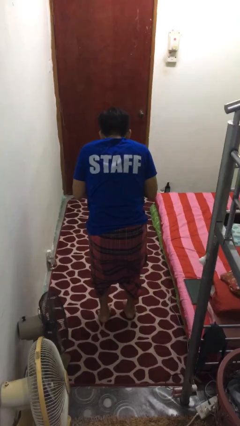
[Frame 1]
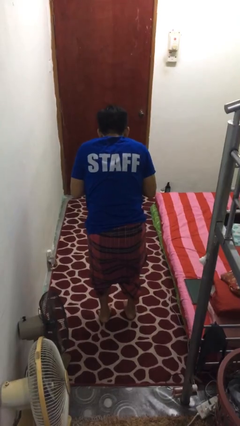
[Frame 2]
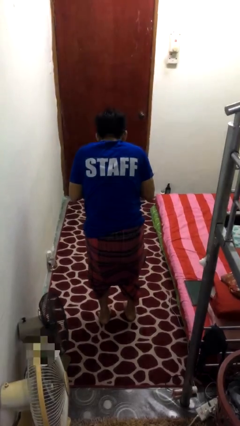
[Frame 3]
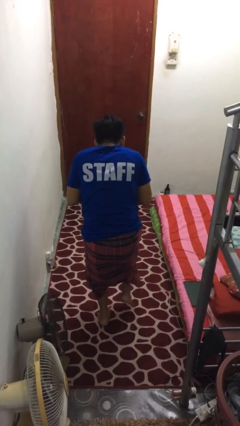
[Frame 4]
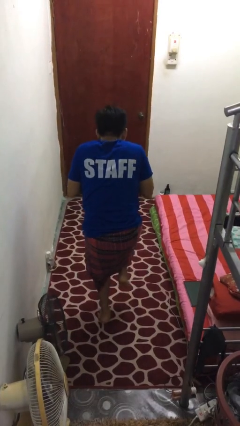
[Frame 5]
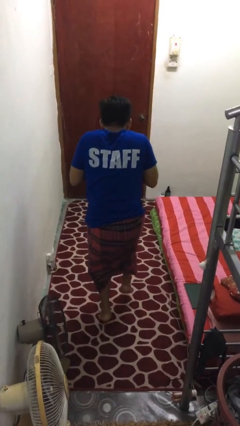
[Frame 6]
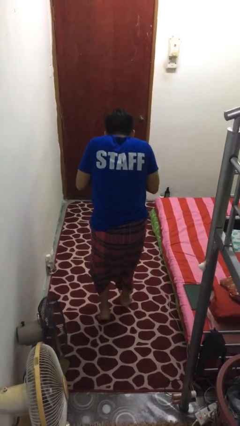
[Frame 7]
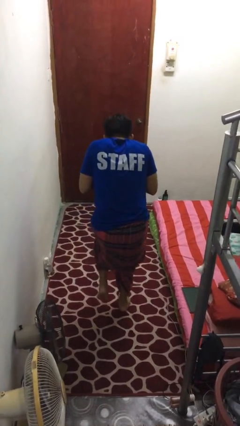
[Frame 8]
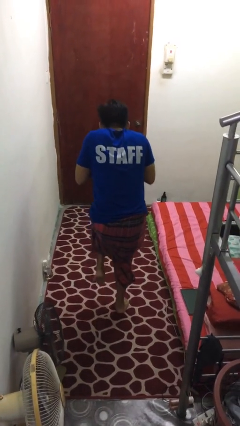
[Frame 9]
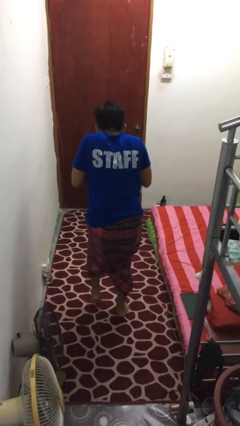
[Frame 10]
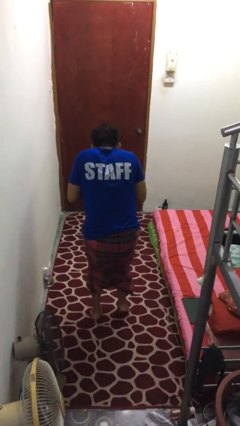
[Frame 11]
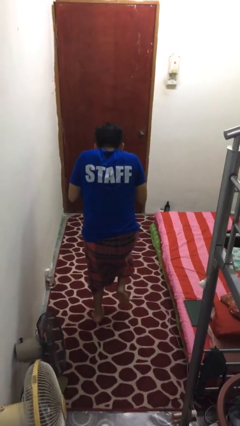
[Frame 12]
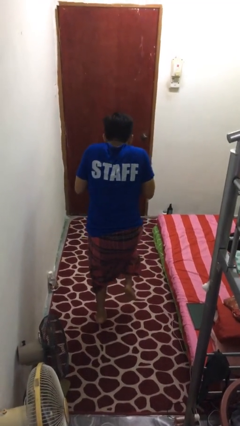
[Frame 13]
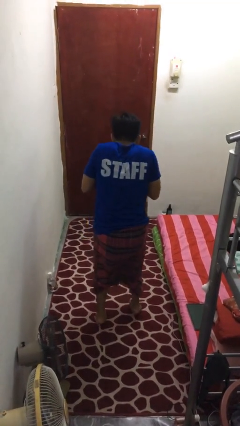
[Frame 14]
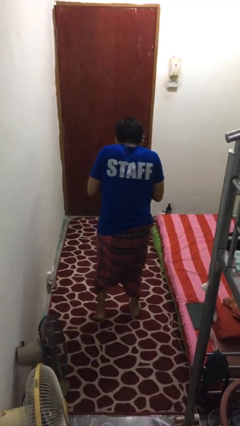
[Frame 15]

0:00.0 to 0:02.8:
person walks tiptoe

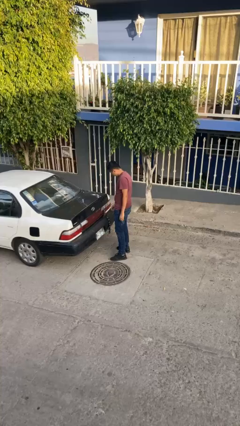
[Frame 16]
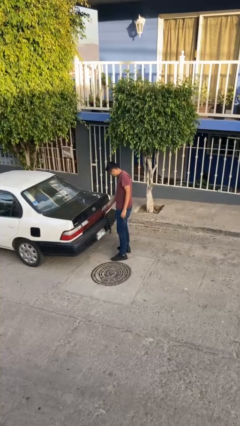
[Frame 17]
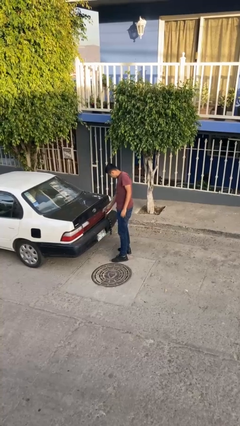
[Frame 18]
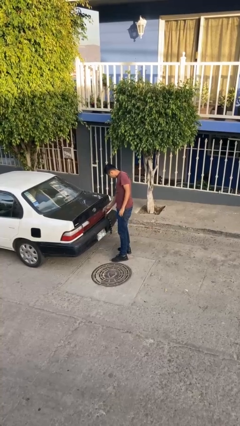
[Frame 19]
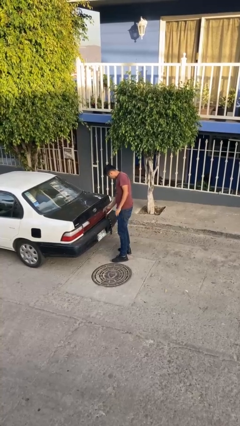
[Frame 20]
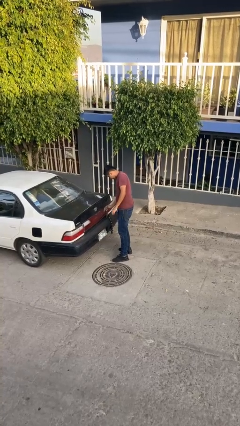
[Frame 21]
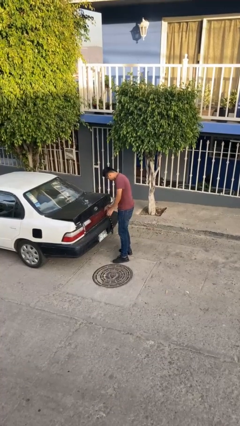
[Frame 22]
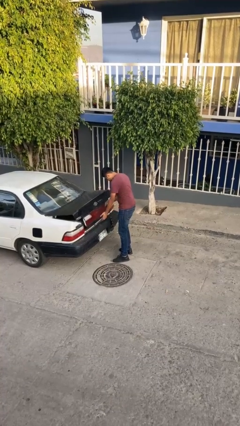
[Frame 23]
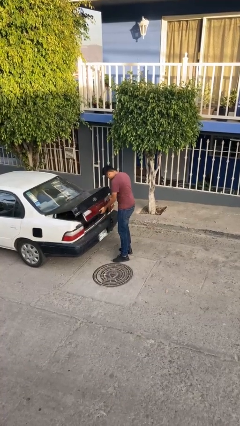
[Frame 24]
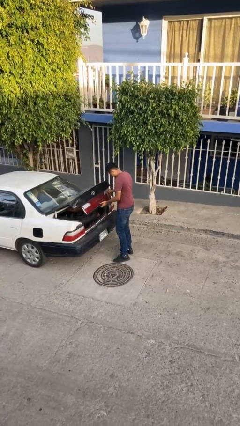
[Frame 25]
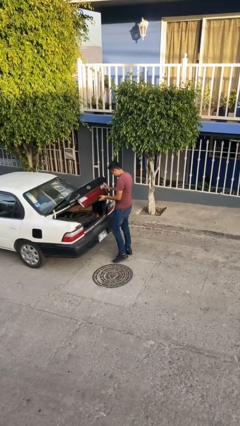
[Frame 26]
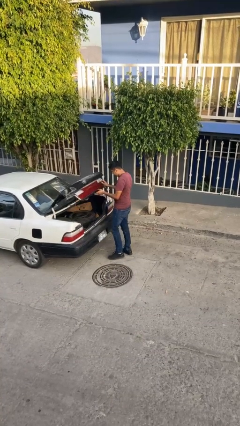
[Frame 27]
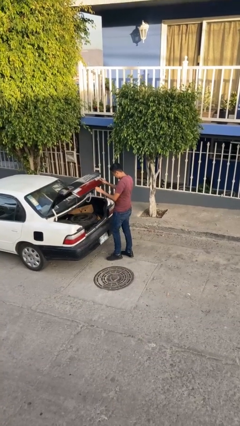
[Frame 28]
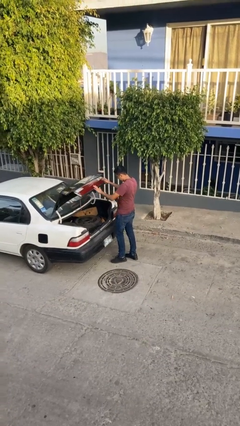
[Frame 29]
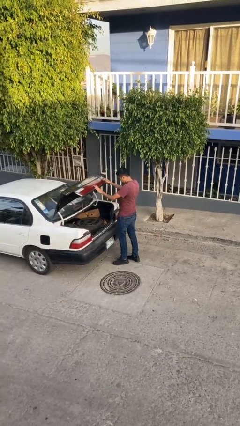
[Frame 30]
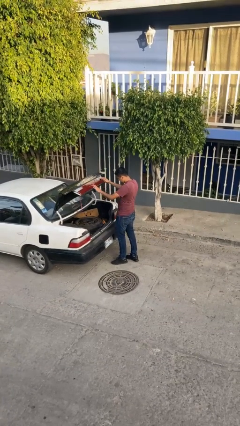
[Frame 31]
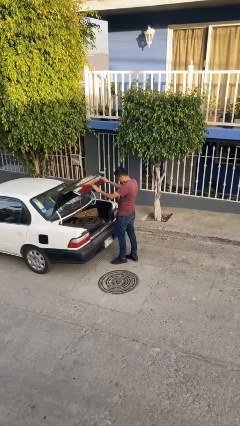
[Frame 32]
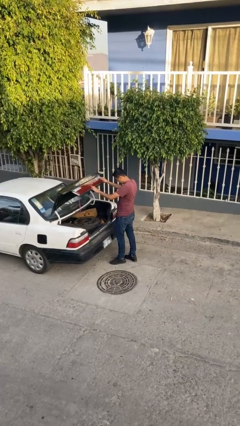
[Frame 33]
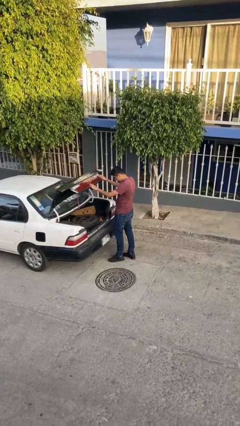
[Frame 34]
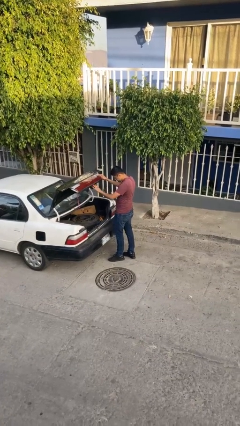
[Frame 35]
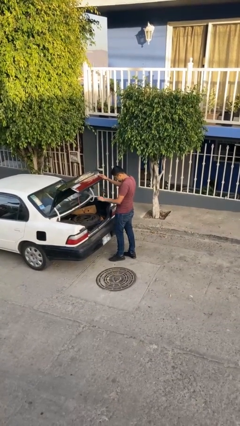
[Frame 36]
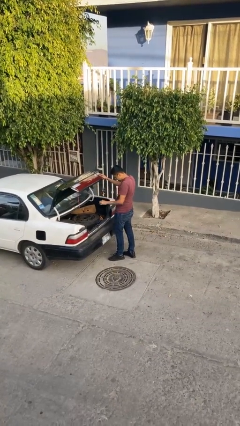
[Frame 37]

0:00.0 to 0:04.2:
person opens car trunk

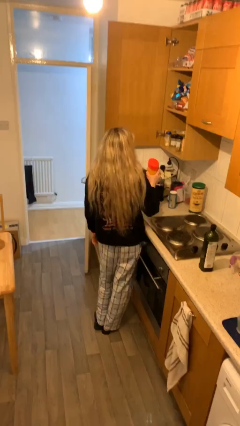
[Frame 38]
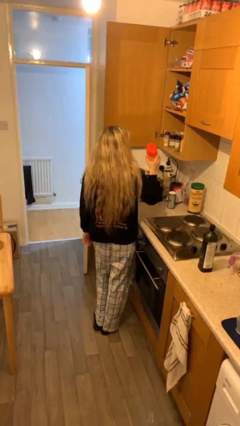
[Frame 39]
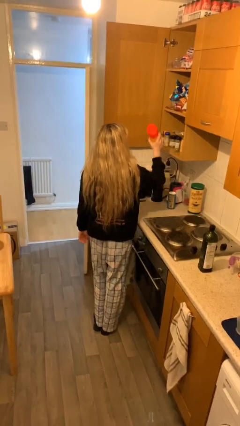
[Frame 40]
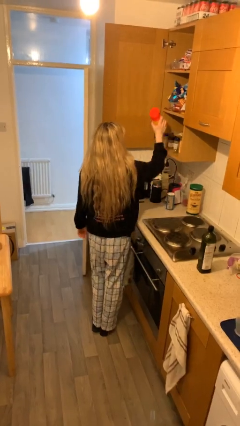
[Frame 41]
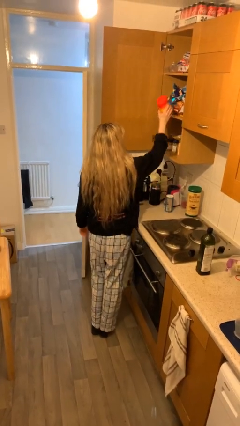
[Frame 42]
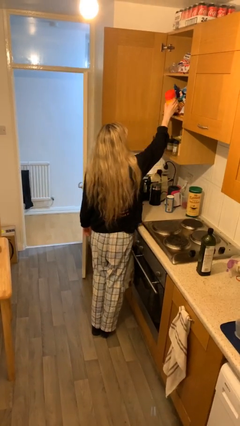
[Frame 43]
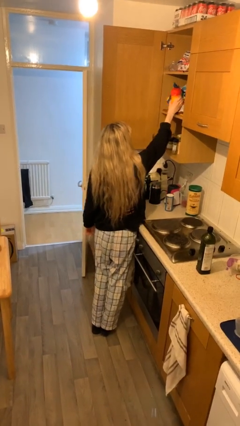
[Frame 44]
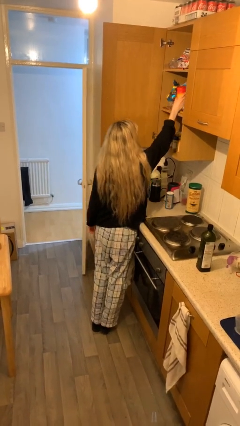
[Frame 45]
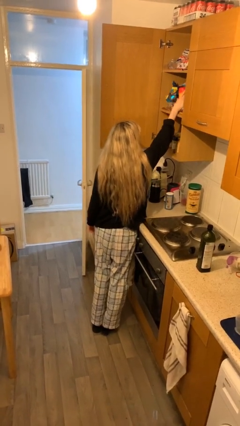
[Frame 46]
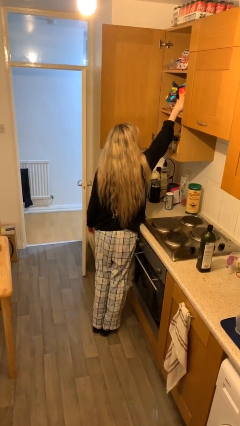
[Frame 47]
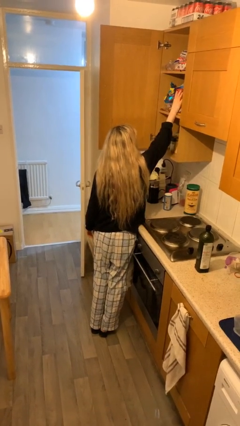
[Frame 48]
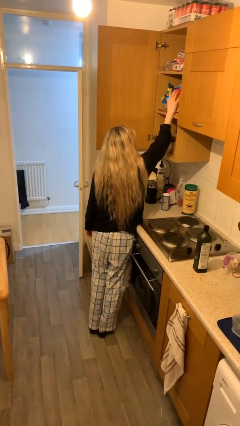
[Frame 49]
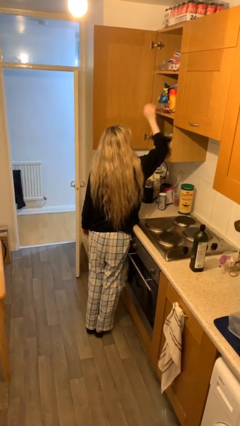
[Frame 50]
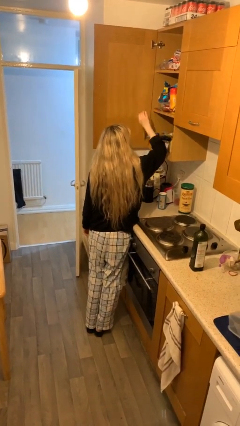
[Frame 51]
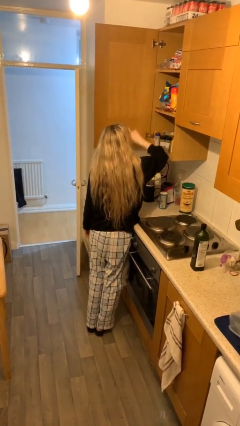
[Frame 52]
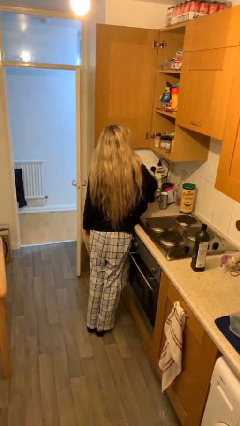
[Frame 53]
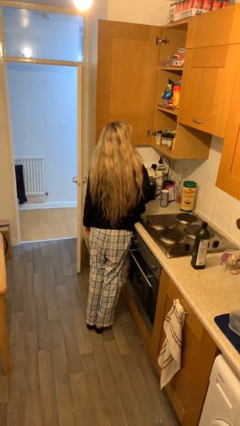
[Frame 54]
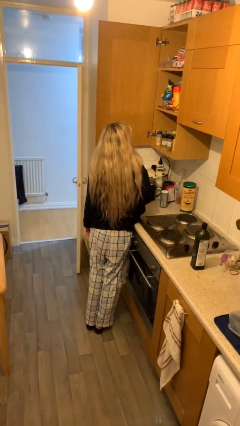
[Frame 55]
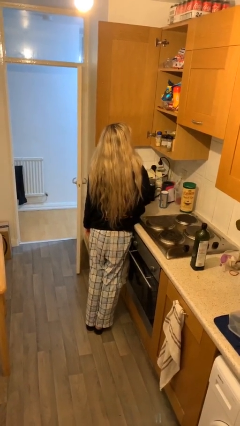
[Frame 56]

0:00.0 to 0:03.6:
person puts down object on shelf

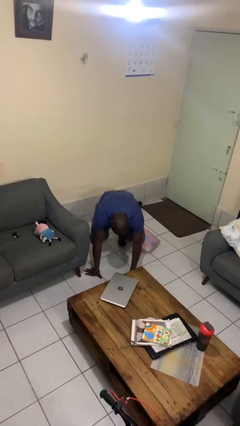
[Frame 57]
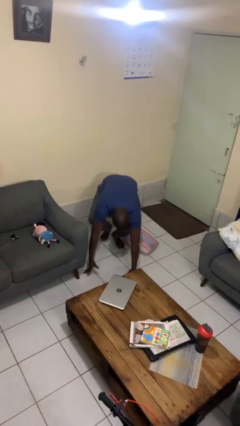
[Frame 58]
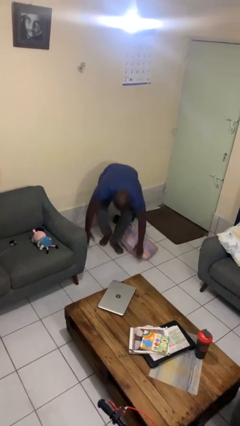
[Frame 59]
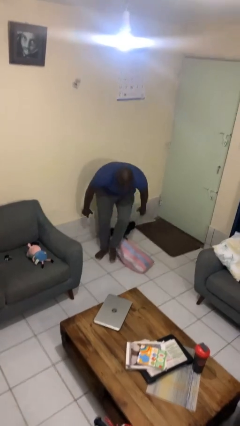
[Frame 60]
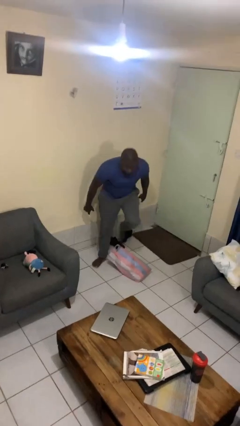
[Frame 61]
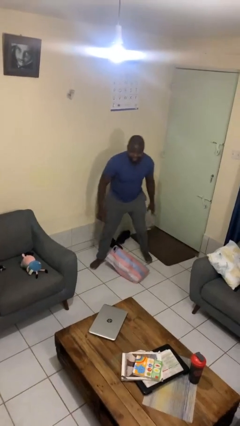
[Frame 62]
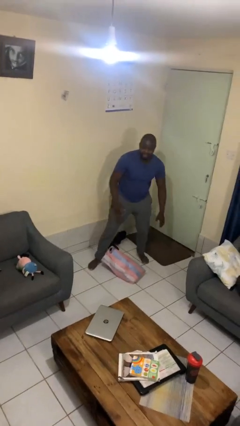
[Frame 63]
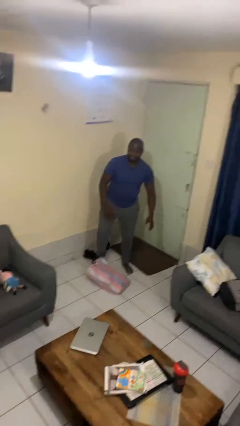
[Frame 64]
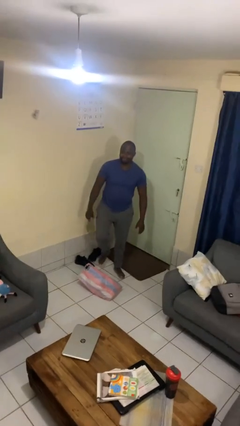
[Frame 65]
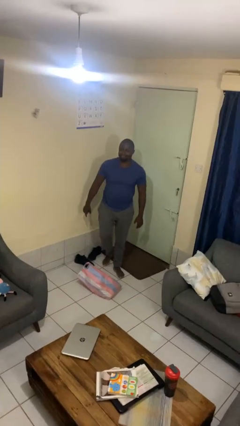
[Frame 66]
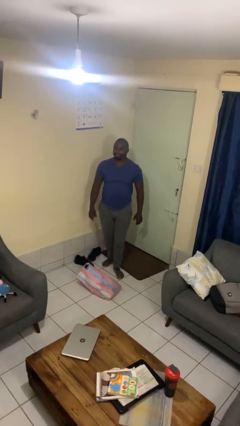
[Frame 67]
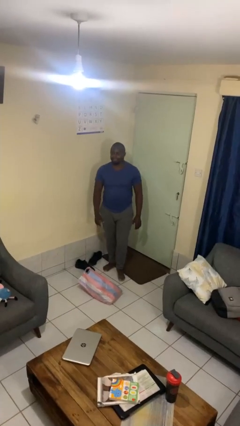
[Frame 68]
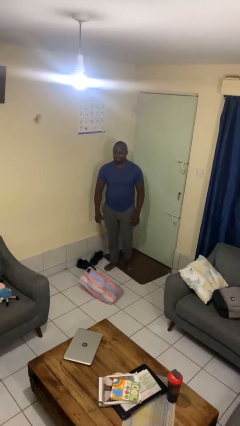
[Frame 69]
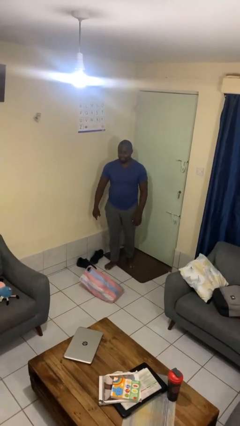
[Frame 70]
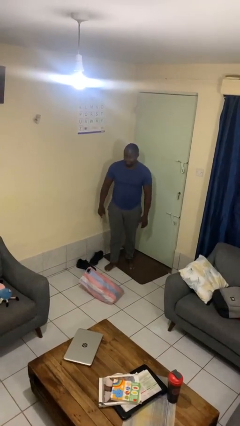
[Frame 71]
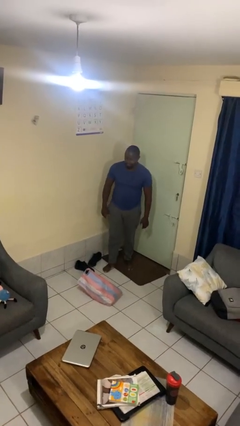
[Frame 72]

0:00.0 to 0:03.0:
person stands up from floor

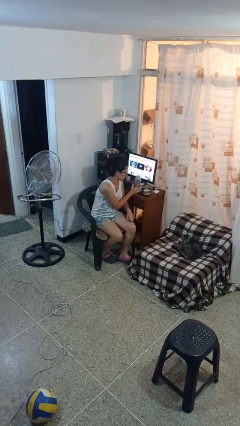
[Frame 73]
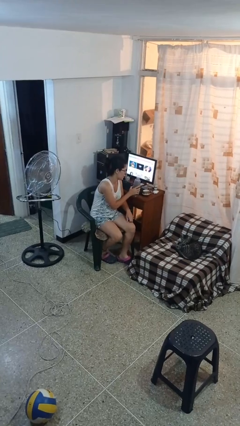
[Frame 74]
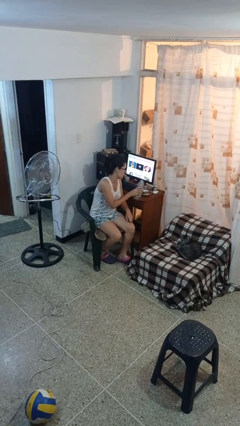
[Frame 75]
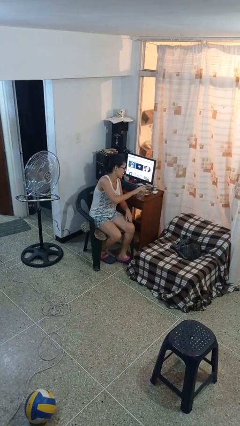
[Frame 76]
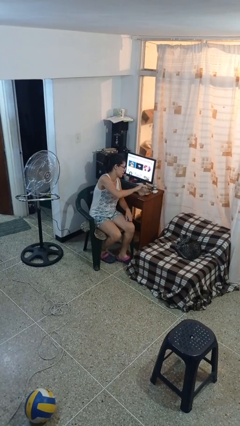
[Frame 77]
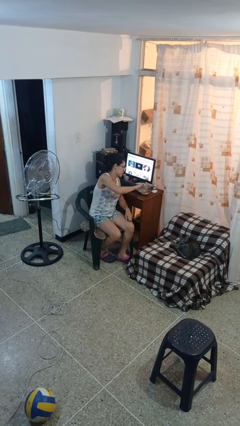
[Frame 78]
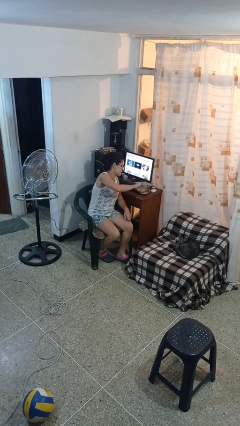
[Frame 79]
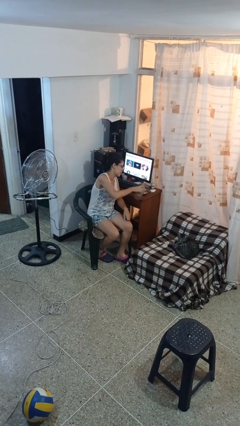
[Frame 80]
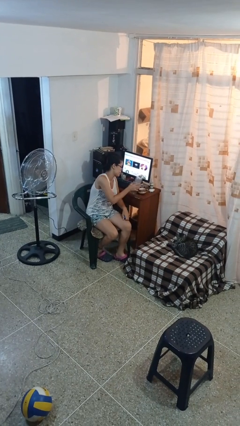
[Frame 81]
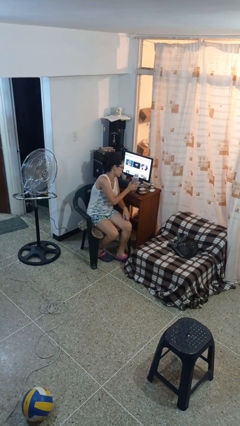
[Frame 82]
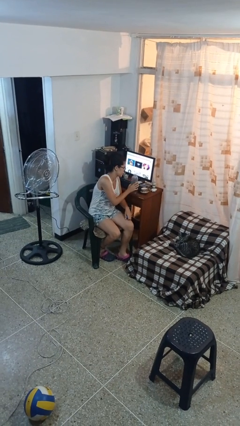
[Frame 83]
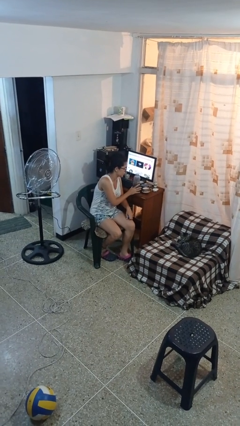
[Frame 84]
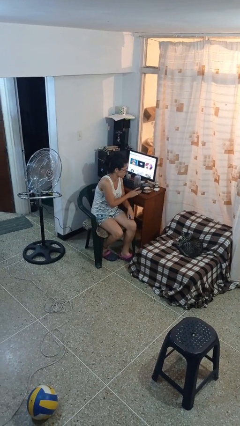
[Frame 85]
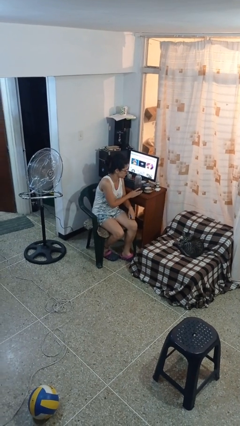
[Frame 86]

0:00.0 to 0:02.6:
person pours liquid into cup

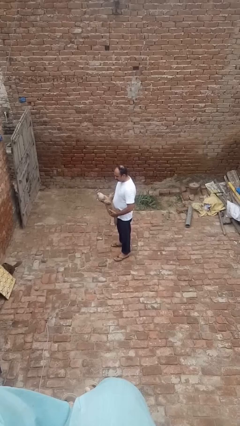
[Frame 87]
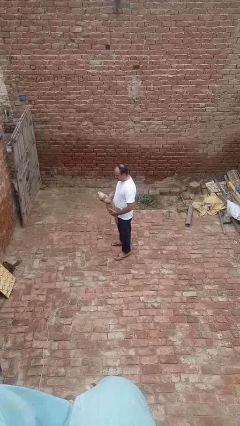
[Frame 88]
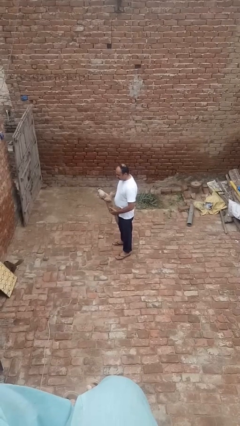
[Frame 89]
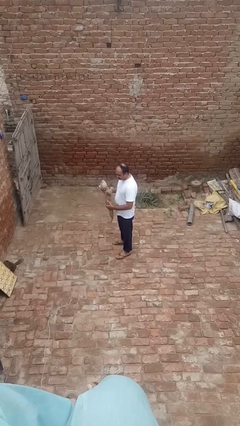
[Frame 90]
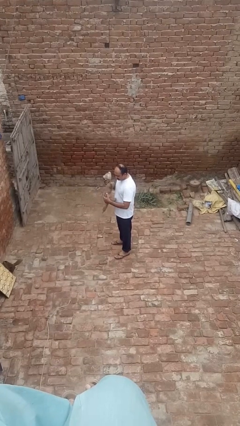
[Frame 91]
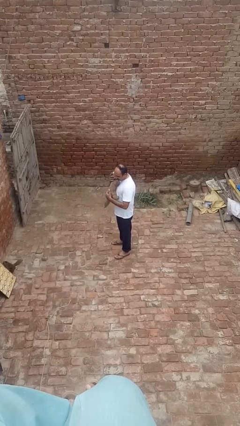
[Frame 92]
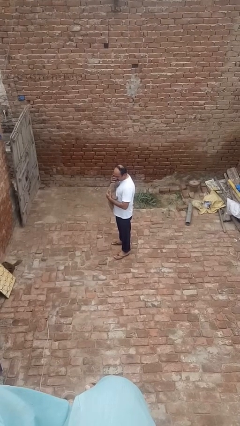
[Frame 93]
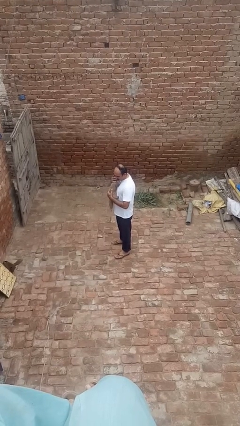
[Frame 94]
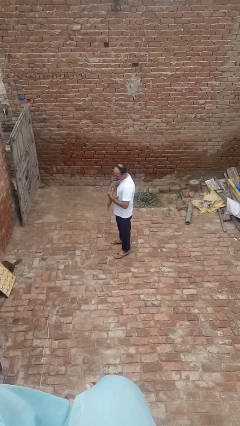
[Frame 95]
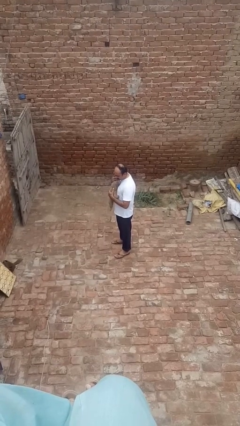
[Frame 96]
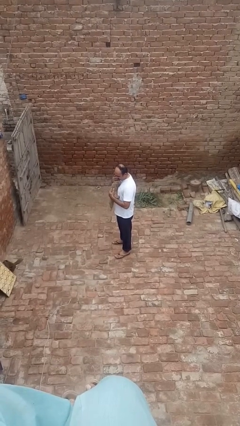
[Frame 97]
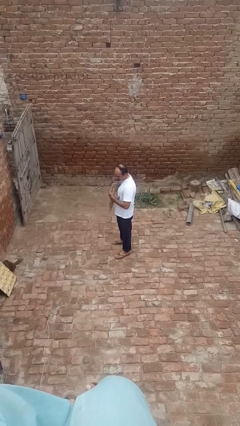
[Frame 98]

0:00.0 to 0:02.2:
person hugs stuffed animal
